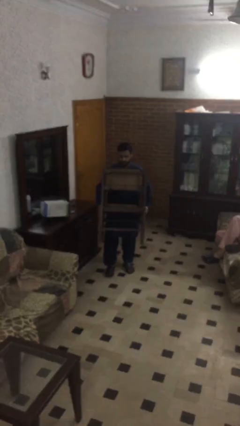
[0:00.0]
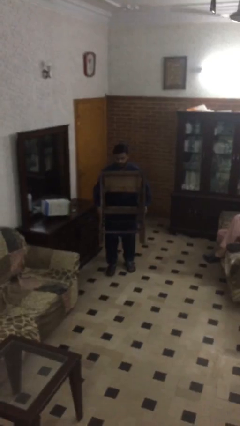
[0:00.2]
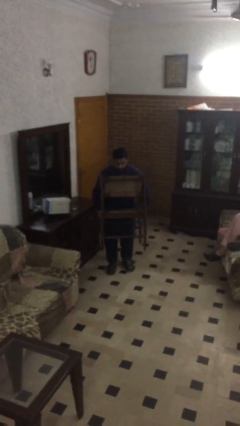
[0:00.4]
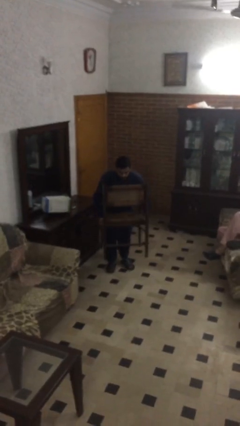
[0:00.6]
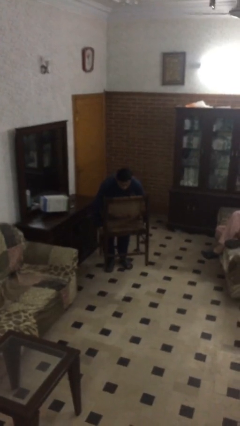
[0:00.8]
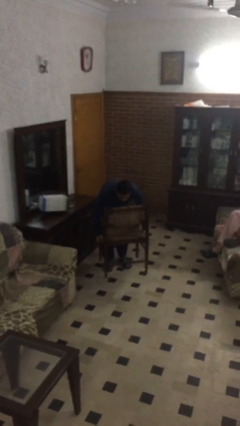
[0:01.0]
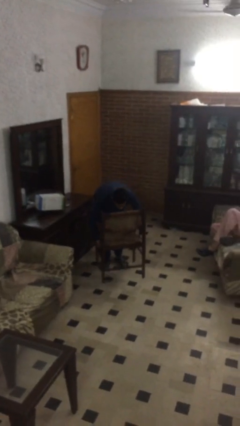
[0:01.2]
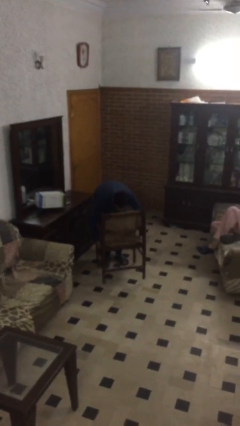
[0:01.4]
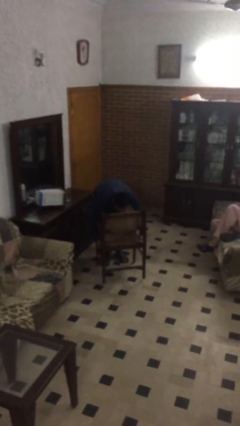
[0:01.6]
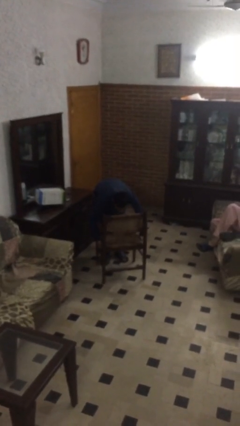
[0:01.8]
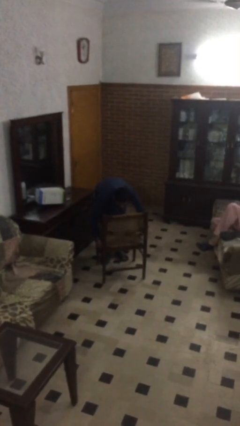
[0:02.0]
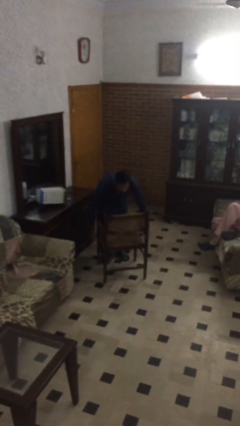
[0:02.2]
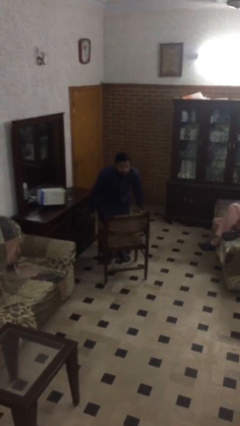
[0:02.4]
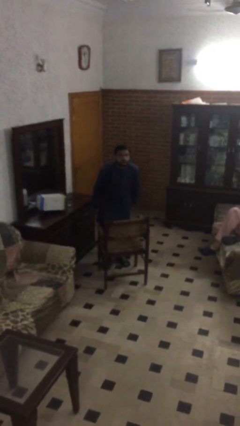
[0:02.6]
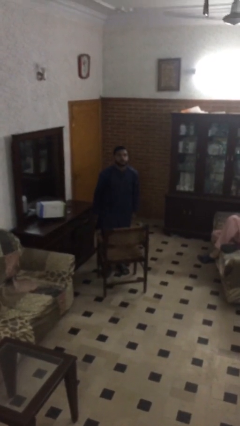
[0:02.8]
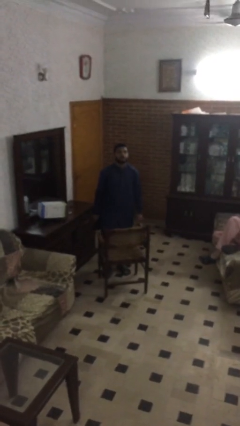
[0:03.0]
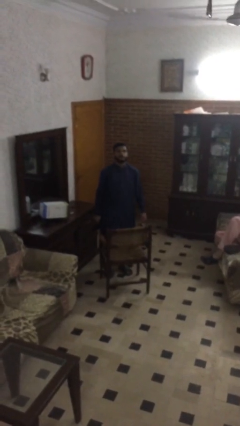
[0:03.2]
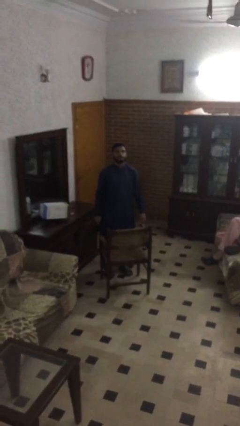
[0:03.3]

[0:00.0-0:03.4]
person puts down object on floor

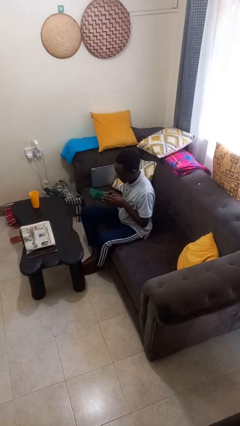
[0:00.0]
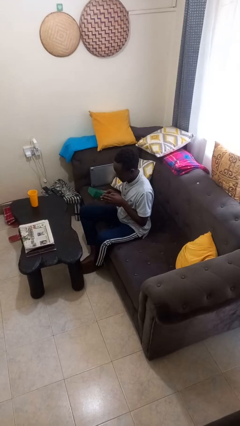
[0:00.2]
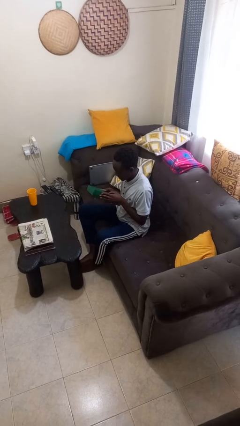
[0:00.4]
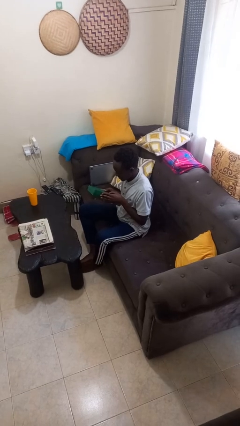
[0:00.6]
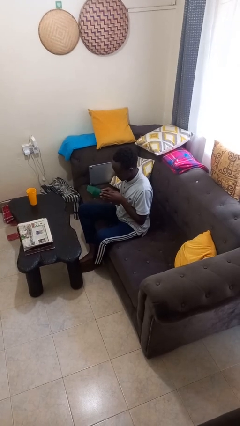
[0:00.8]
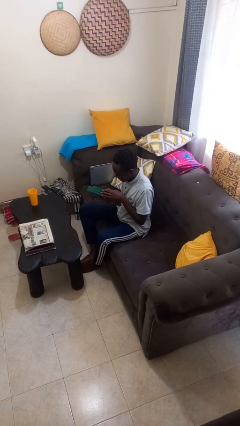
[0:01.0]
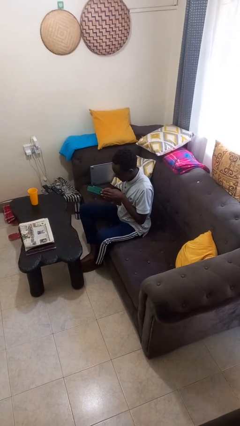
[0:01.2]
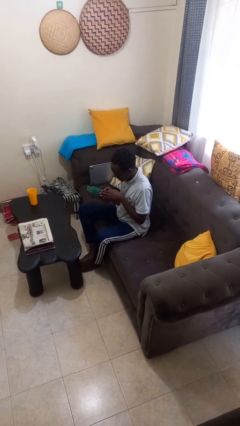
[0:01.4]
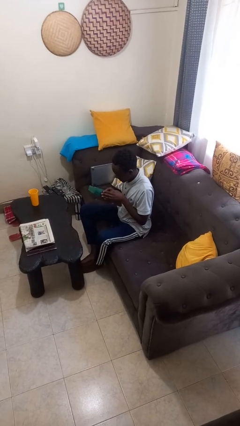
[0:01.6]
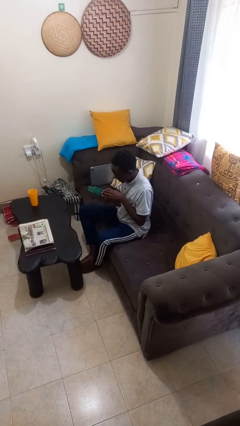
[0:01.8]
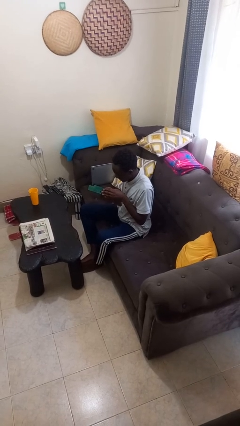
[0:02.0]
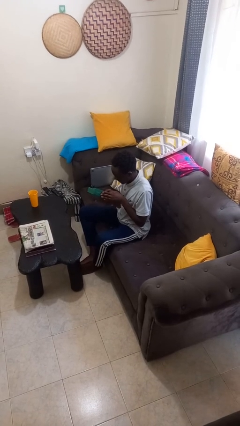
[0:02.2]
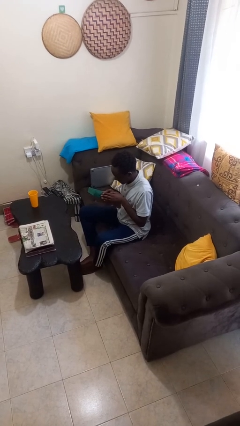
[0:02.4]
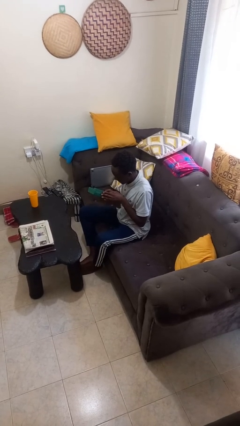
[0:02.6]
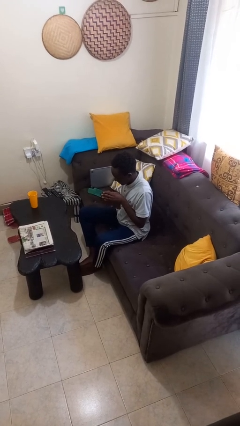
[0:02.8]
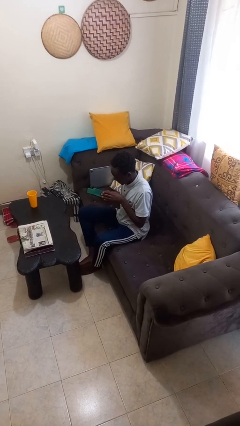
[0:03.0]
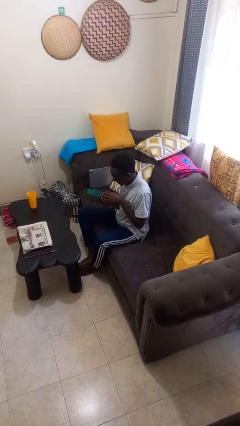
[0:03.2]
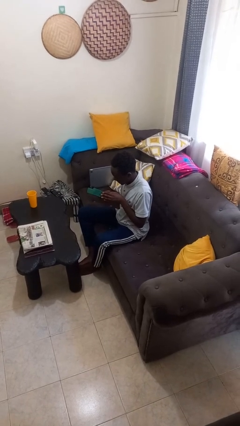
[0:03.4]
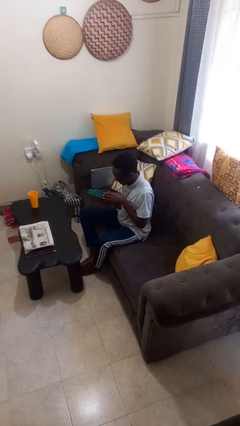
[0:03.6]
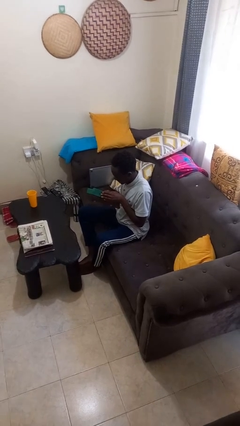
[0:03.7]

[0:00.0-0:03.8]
person interacts with handheld game

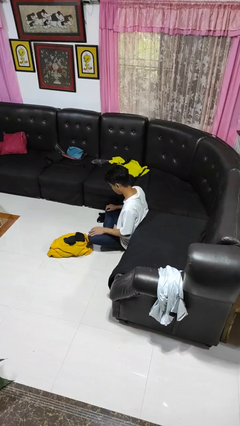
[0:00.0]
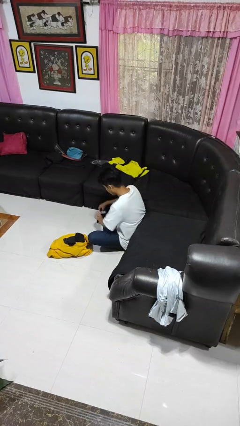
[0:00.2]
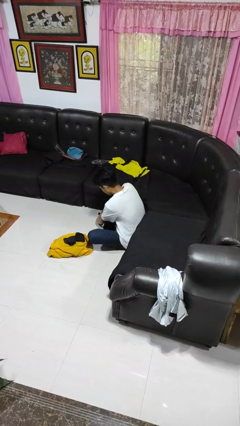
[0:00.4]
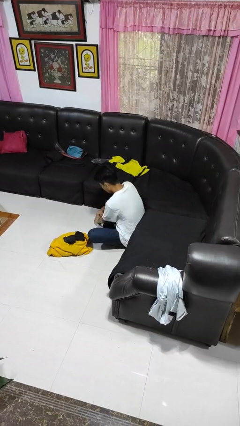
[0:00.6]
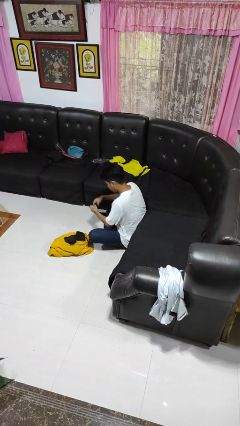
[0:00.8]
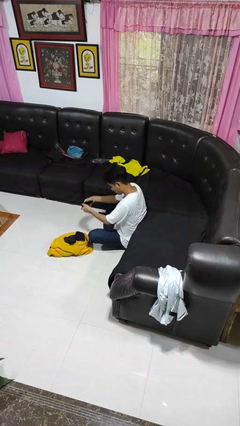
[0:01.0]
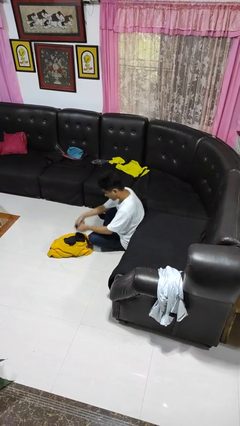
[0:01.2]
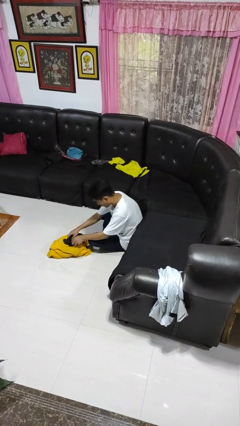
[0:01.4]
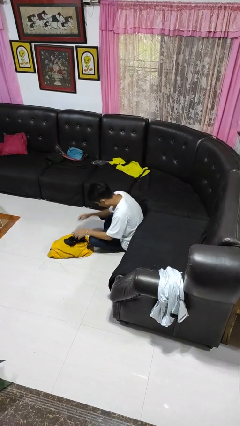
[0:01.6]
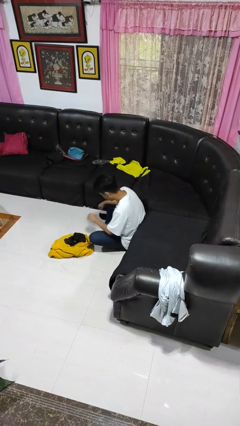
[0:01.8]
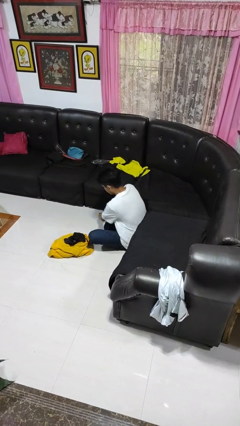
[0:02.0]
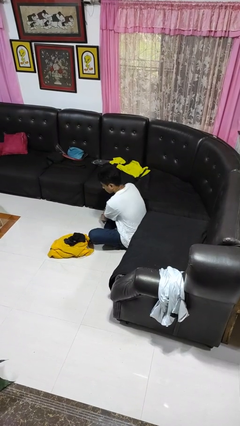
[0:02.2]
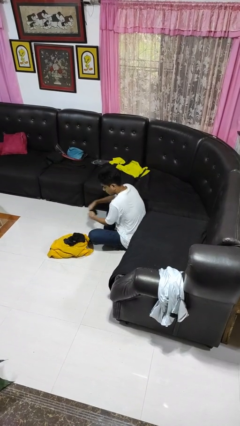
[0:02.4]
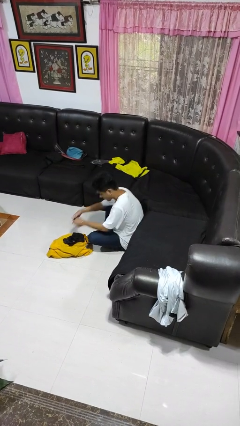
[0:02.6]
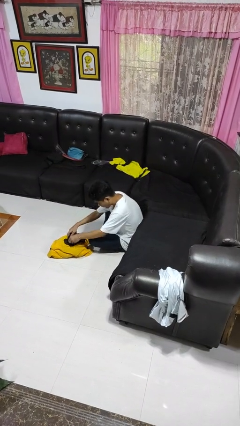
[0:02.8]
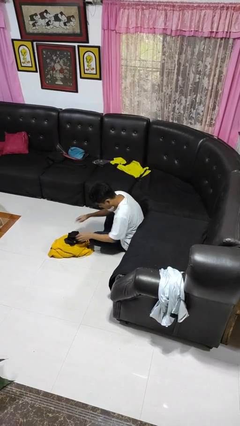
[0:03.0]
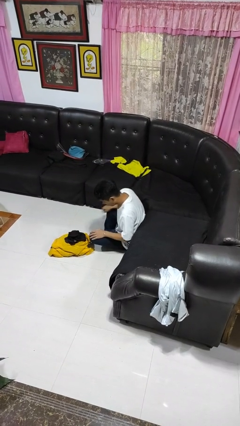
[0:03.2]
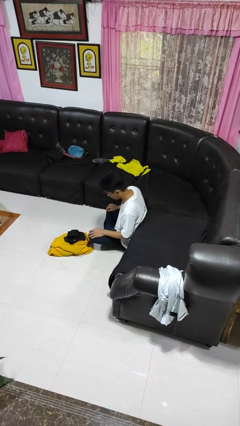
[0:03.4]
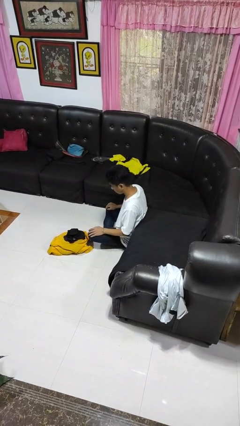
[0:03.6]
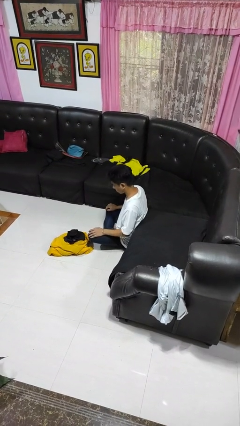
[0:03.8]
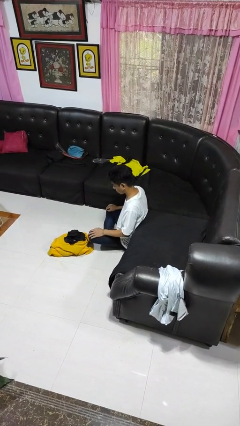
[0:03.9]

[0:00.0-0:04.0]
person folds socks

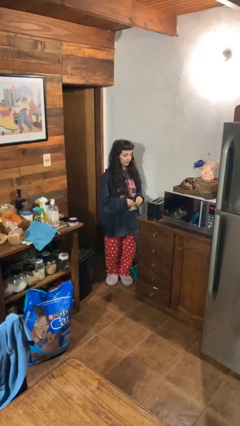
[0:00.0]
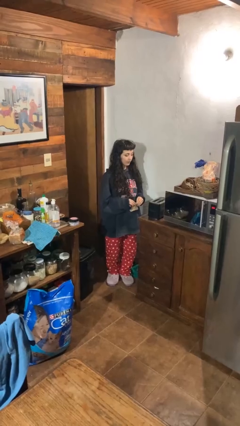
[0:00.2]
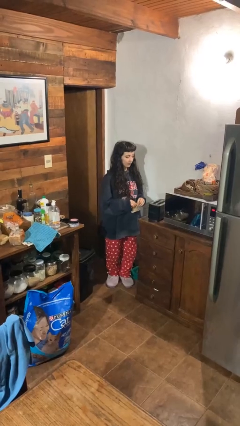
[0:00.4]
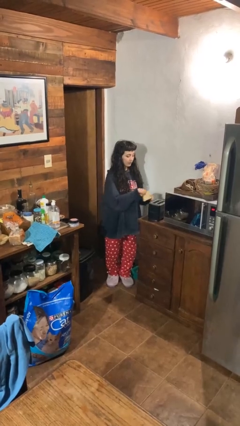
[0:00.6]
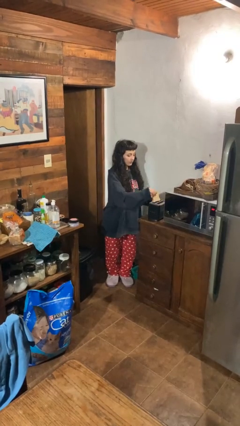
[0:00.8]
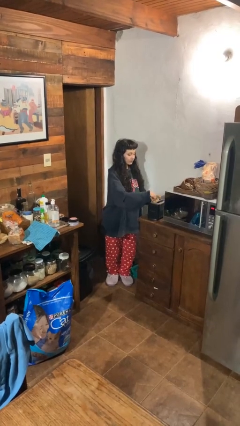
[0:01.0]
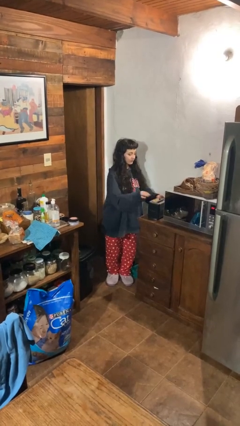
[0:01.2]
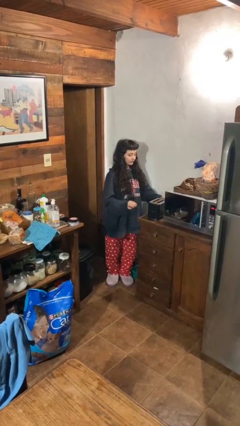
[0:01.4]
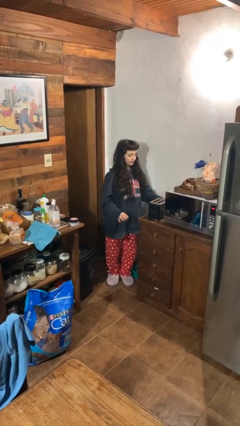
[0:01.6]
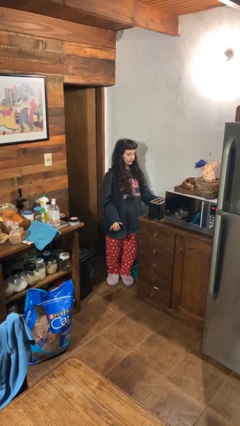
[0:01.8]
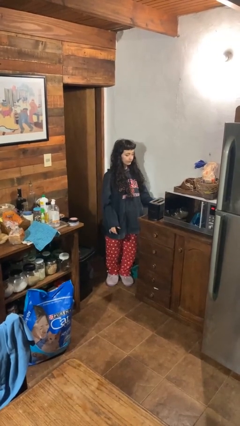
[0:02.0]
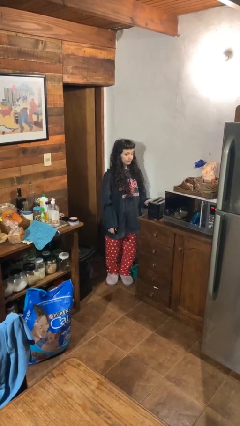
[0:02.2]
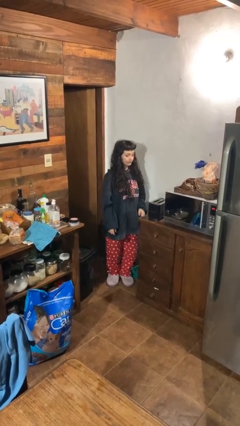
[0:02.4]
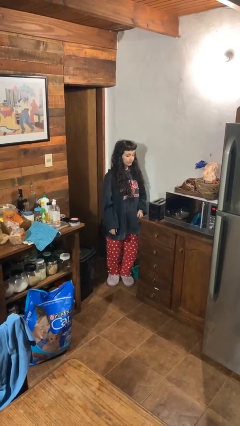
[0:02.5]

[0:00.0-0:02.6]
person puts object into toaster

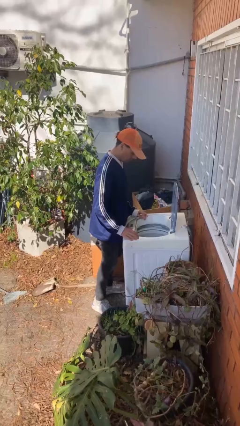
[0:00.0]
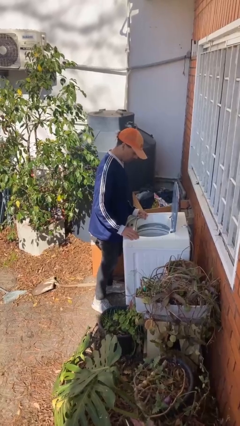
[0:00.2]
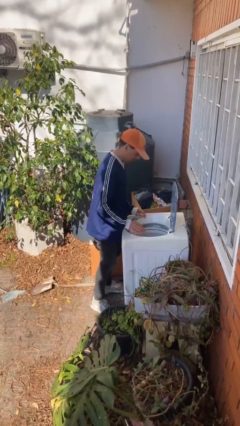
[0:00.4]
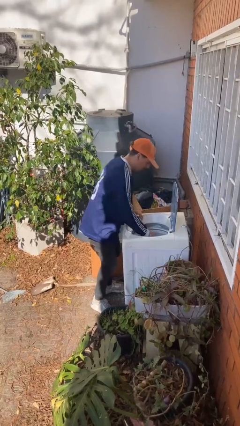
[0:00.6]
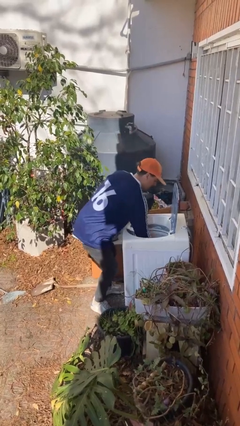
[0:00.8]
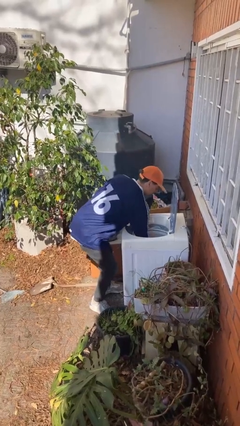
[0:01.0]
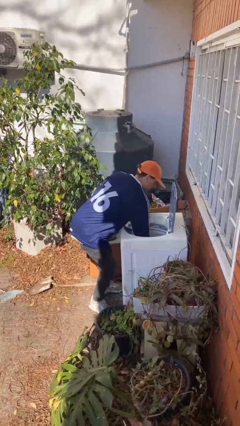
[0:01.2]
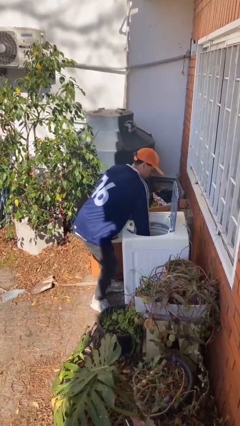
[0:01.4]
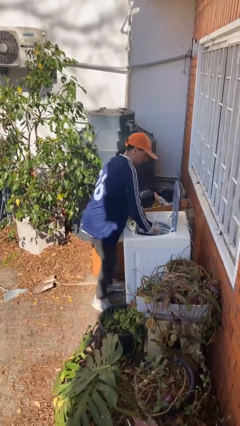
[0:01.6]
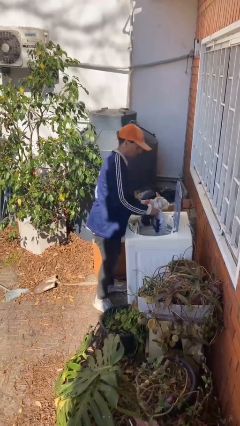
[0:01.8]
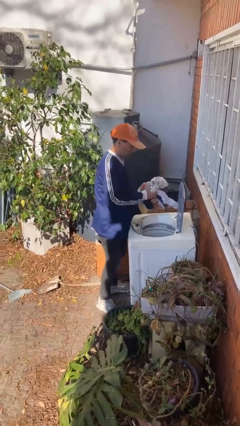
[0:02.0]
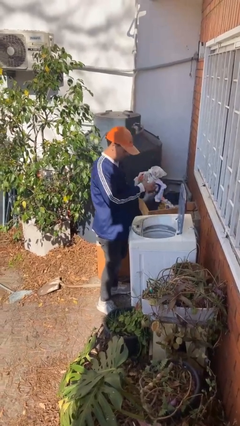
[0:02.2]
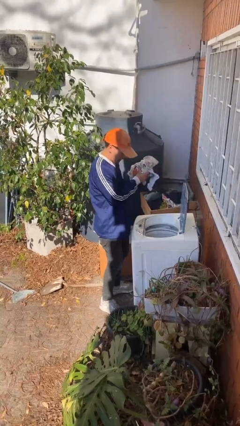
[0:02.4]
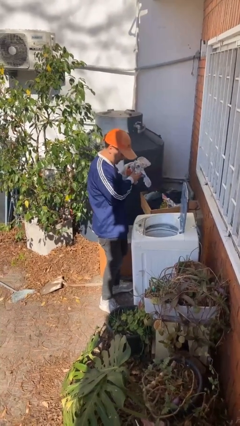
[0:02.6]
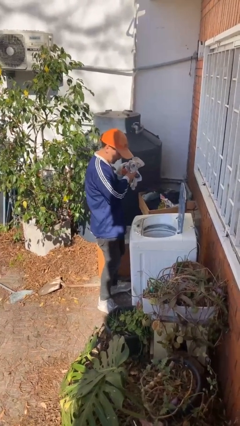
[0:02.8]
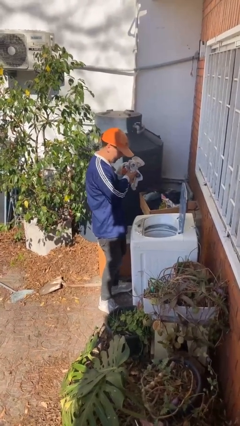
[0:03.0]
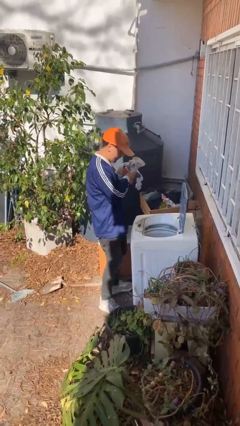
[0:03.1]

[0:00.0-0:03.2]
person loads clotheswasher

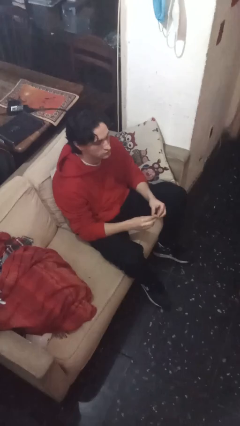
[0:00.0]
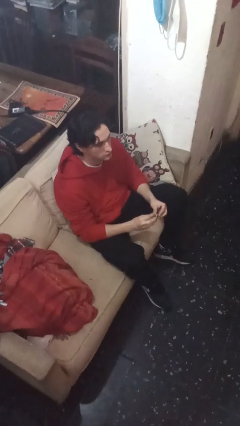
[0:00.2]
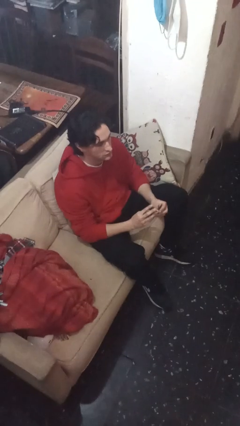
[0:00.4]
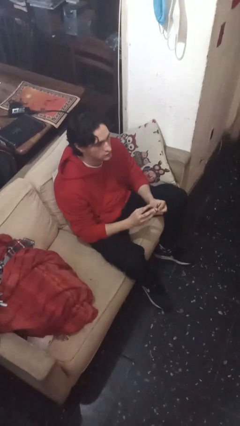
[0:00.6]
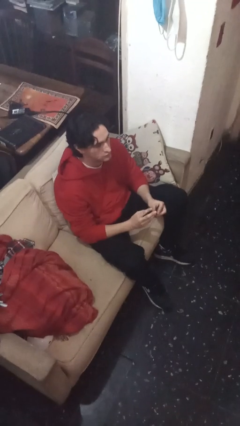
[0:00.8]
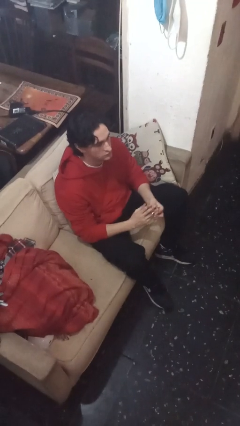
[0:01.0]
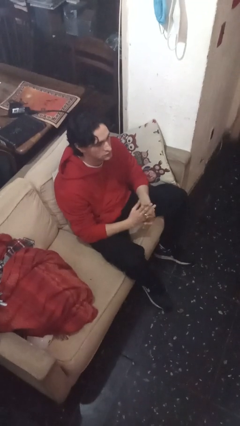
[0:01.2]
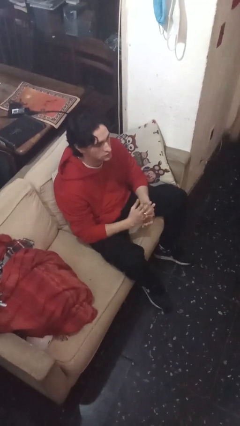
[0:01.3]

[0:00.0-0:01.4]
person puts on ring
